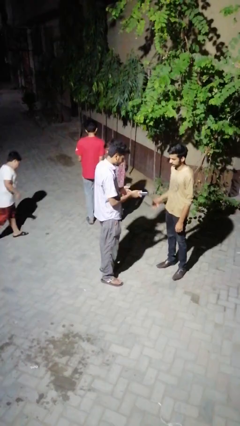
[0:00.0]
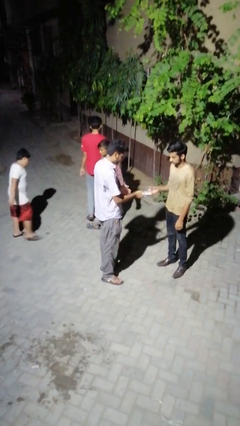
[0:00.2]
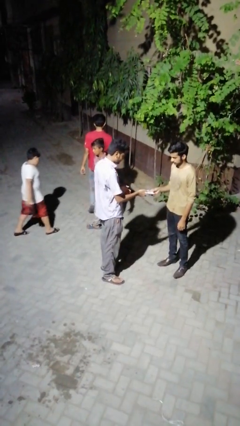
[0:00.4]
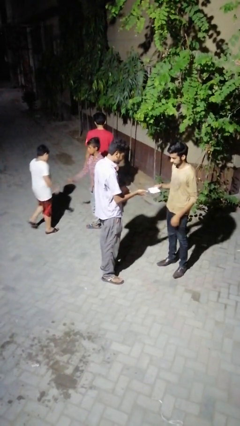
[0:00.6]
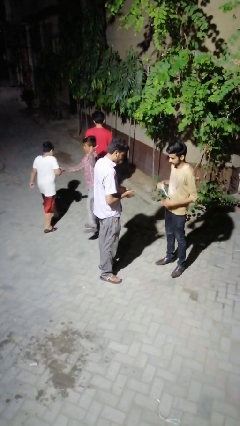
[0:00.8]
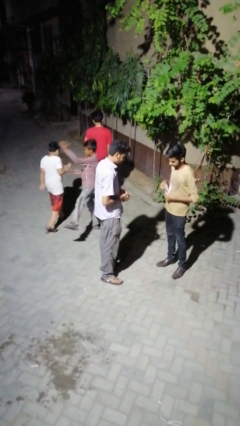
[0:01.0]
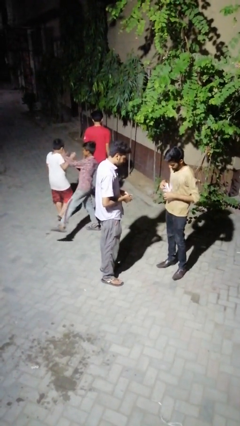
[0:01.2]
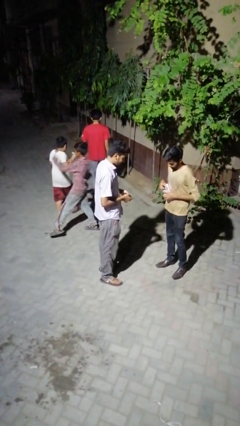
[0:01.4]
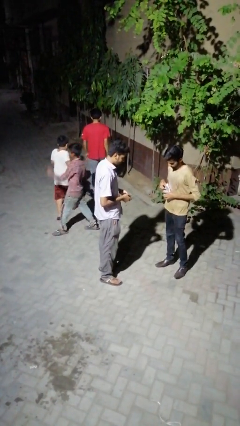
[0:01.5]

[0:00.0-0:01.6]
person transfers object to person

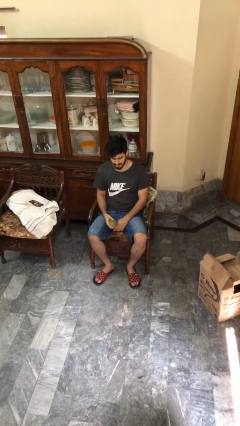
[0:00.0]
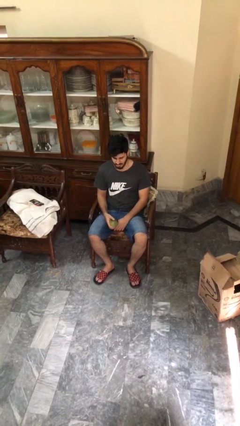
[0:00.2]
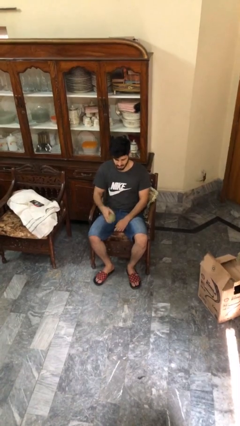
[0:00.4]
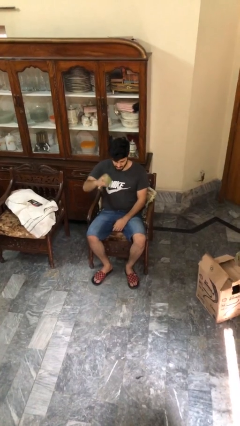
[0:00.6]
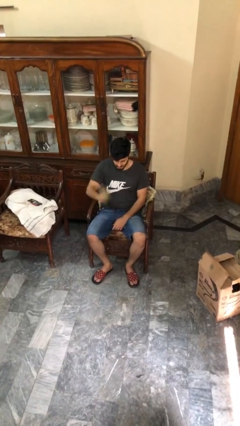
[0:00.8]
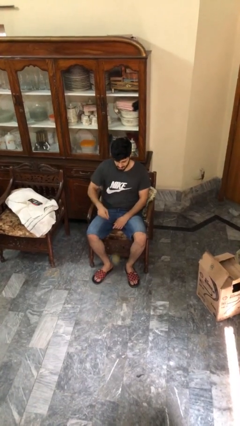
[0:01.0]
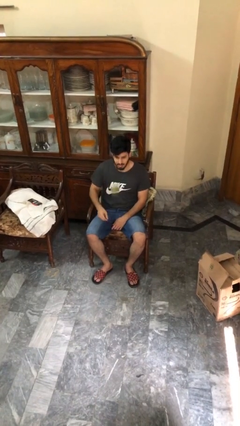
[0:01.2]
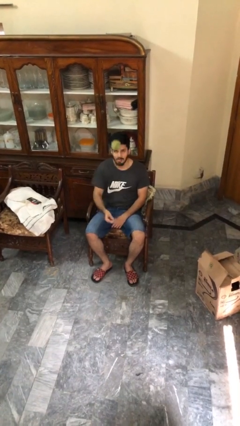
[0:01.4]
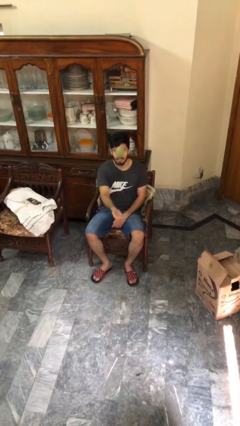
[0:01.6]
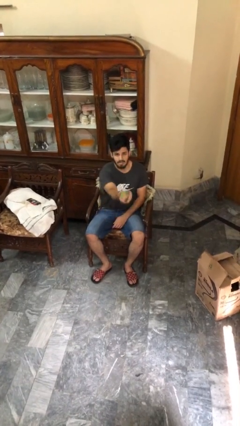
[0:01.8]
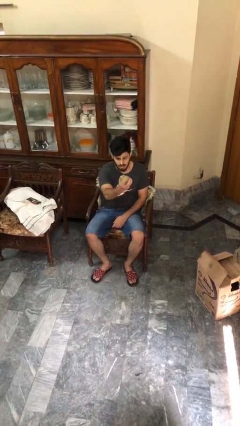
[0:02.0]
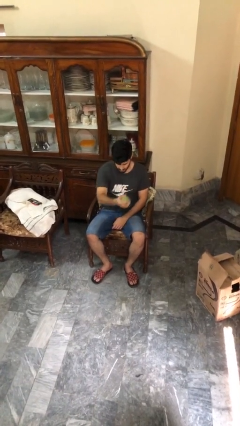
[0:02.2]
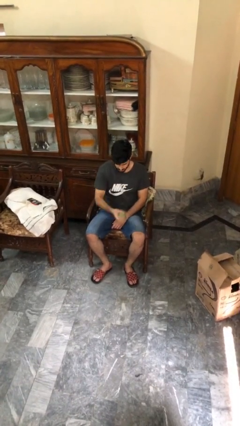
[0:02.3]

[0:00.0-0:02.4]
person bounces ball on floor

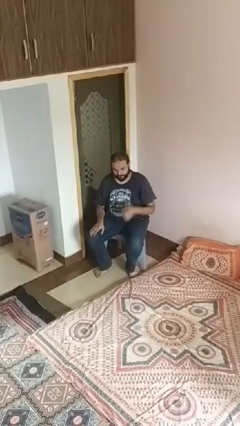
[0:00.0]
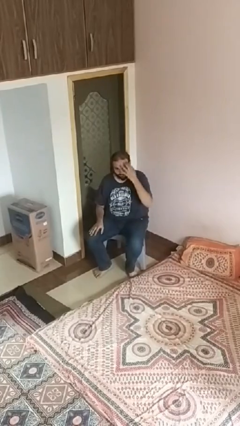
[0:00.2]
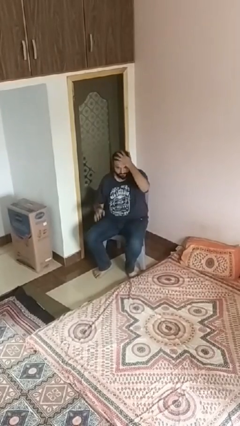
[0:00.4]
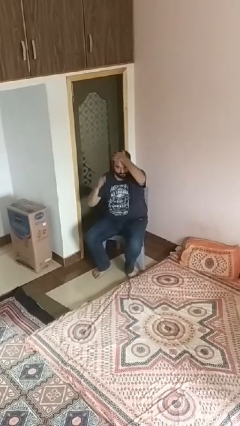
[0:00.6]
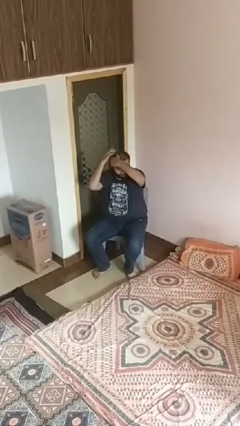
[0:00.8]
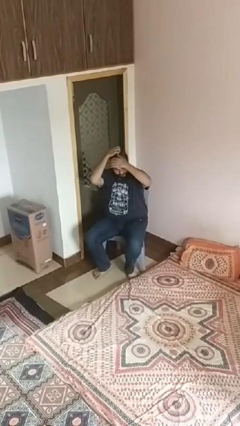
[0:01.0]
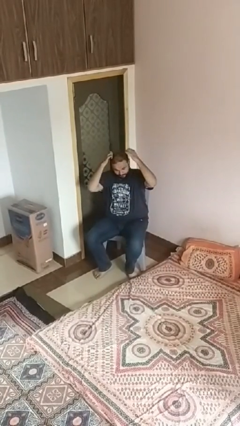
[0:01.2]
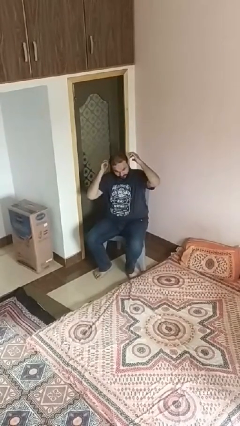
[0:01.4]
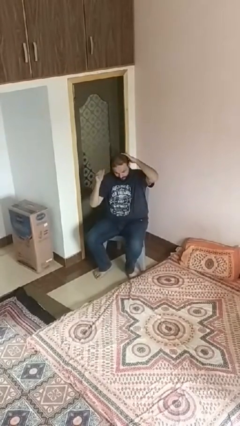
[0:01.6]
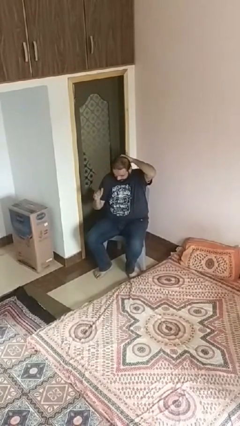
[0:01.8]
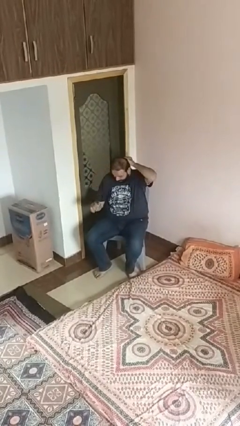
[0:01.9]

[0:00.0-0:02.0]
person strokes hair

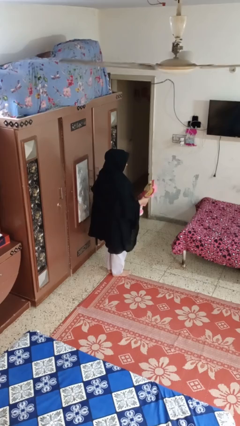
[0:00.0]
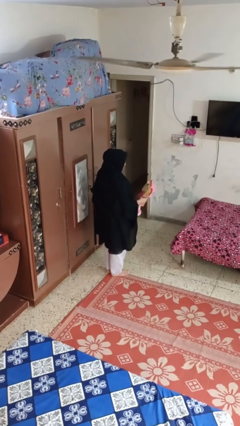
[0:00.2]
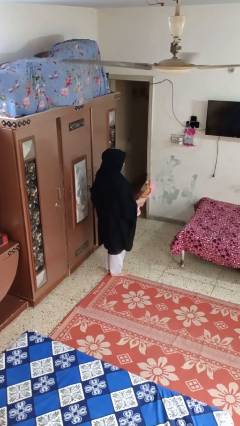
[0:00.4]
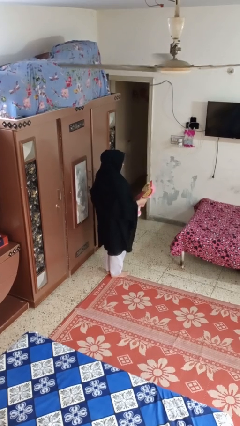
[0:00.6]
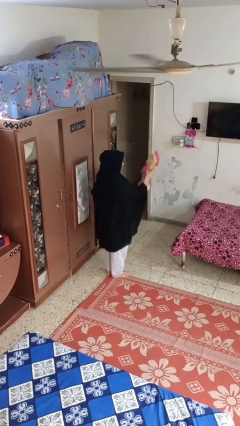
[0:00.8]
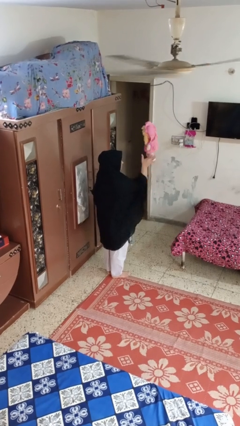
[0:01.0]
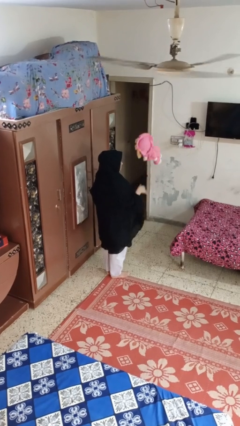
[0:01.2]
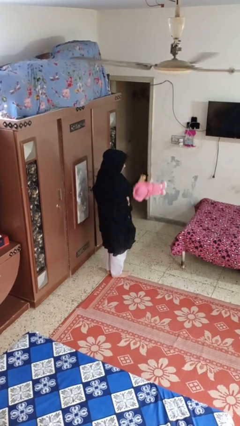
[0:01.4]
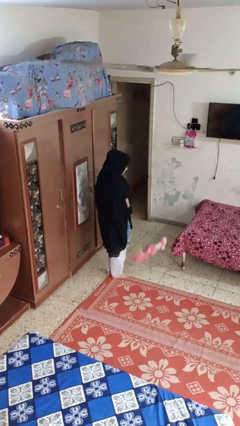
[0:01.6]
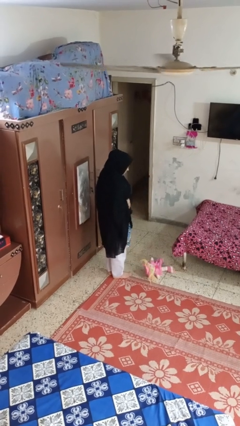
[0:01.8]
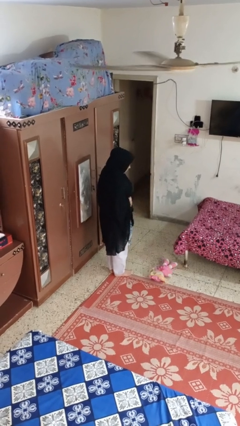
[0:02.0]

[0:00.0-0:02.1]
person throws object into air

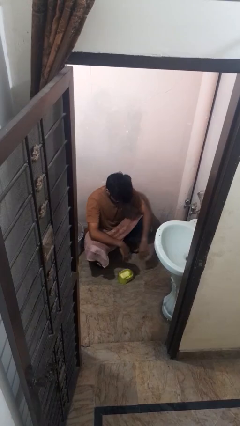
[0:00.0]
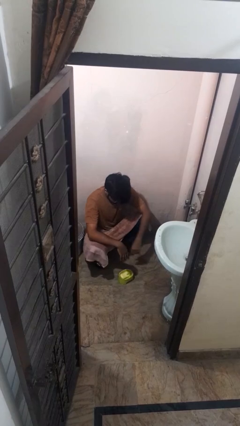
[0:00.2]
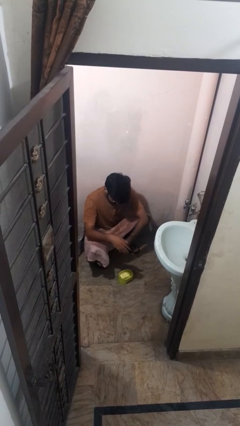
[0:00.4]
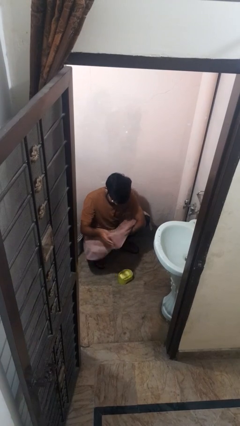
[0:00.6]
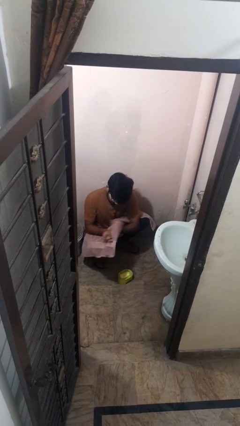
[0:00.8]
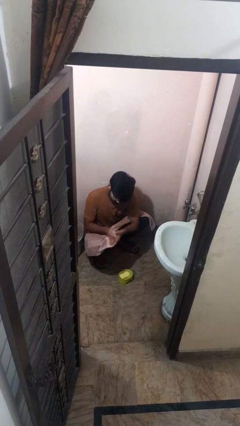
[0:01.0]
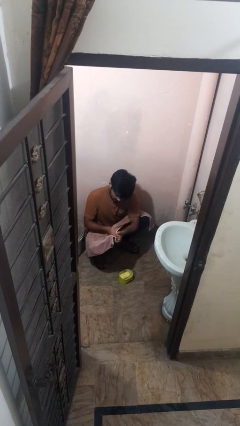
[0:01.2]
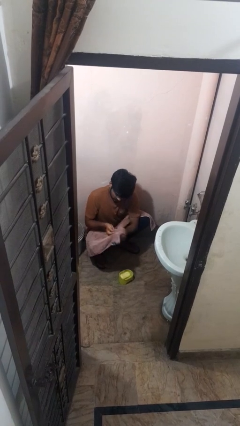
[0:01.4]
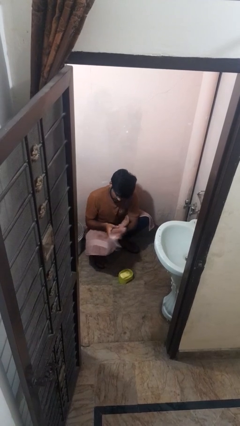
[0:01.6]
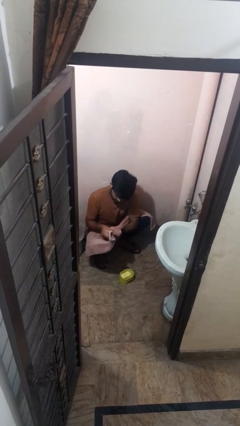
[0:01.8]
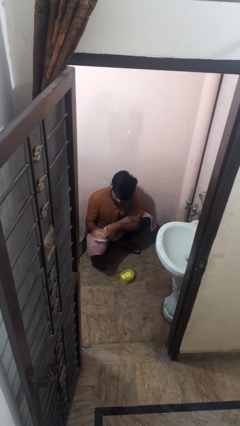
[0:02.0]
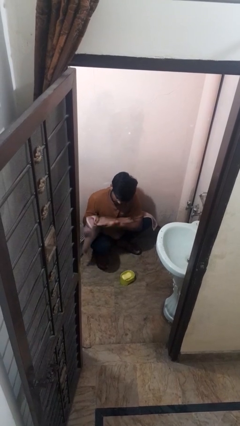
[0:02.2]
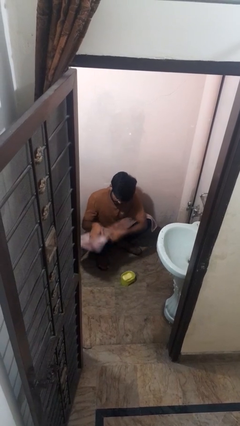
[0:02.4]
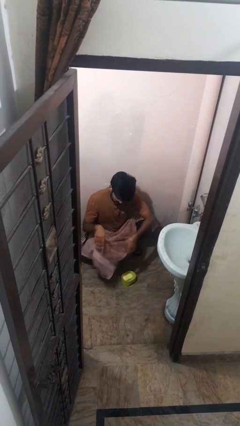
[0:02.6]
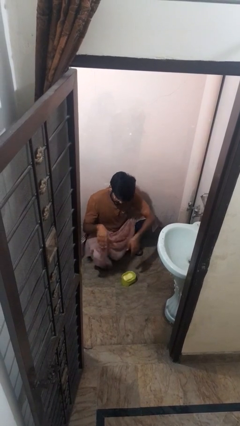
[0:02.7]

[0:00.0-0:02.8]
person dries hands with towel

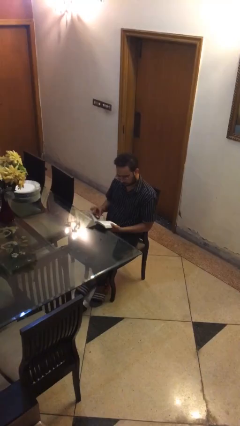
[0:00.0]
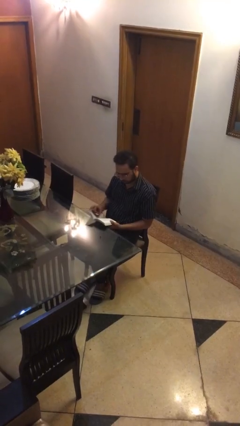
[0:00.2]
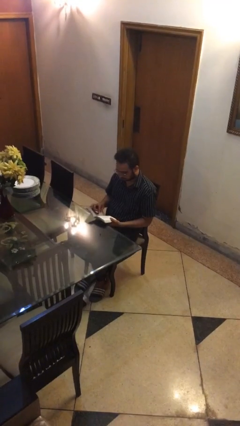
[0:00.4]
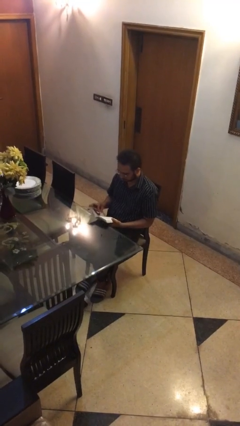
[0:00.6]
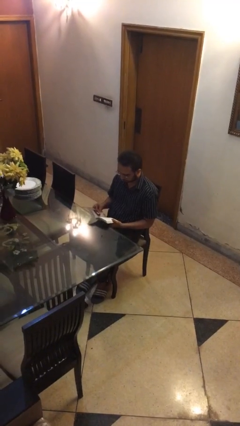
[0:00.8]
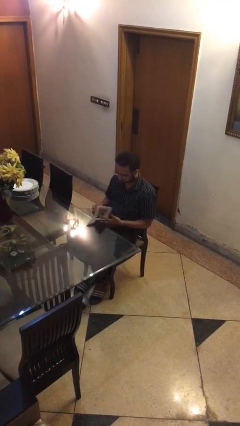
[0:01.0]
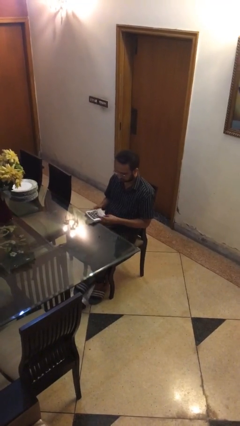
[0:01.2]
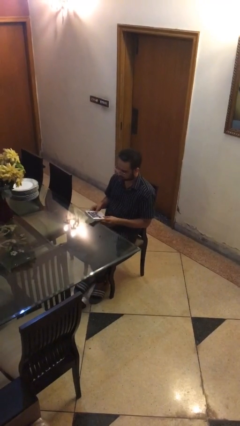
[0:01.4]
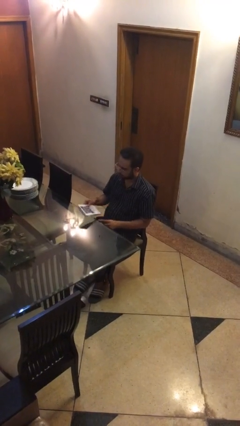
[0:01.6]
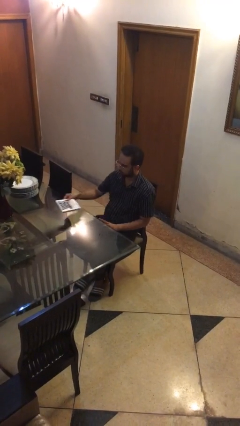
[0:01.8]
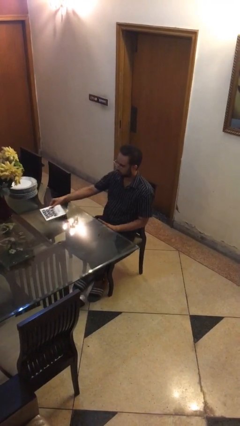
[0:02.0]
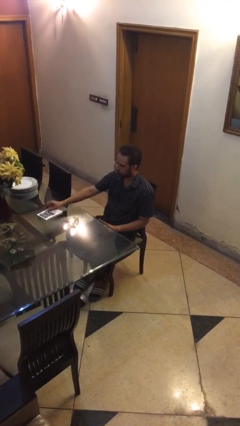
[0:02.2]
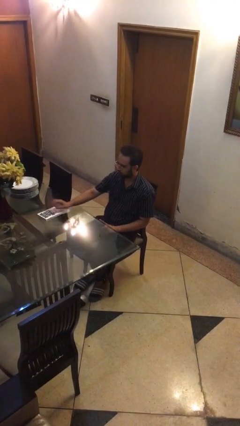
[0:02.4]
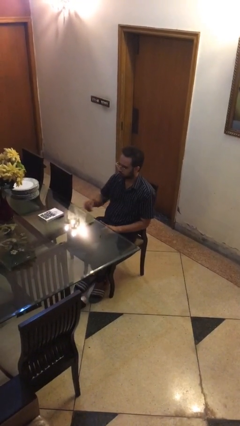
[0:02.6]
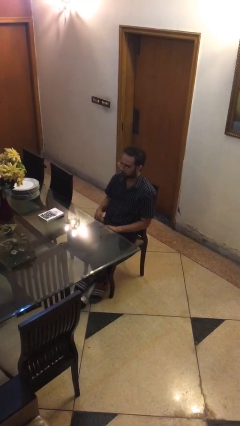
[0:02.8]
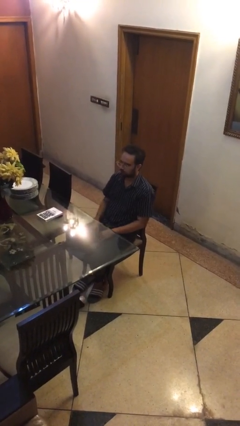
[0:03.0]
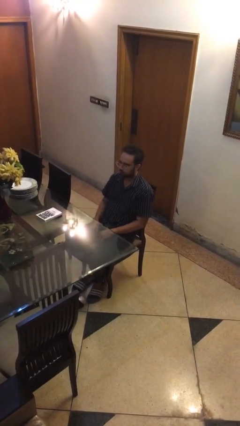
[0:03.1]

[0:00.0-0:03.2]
person puts down object on table

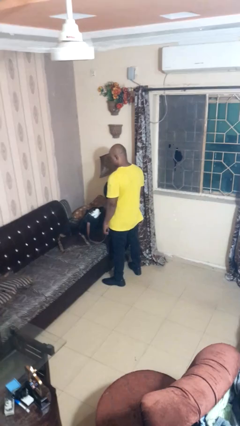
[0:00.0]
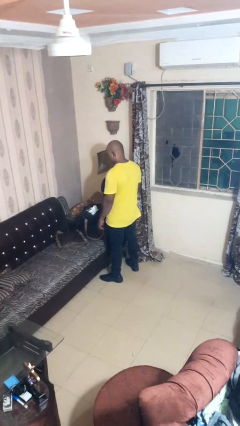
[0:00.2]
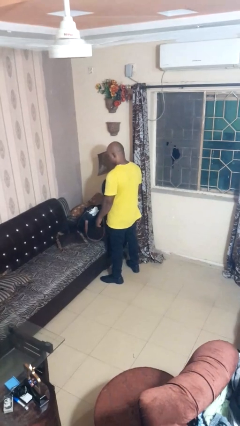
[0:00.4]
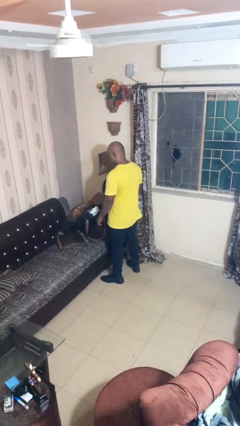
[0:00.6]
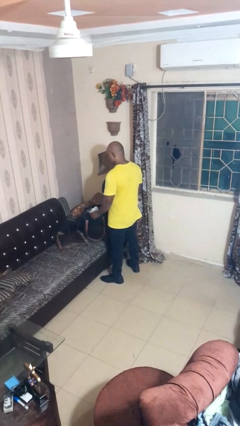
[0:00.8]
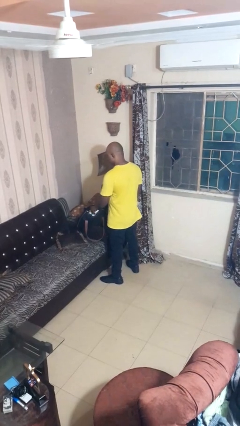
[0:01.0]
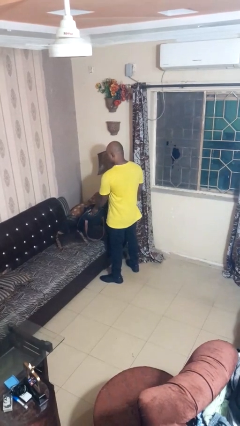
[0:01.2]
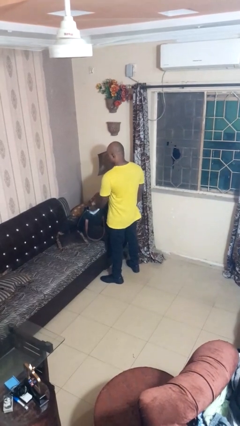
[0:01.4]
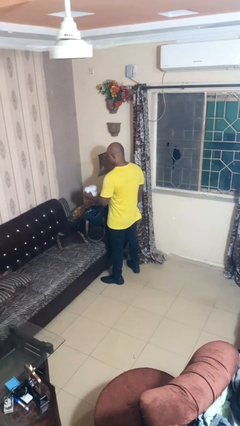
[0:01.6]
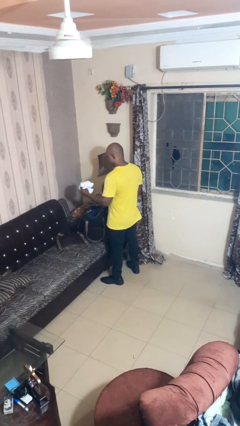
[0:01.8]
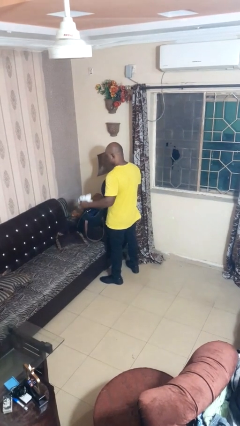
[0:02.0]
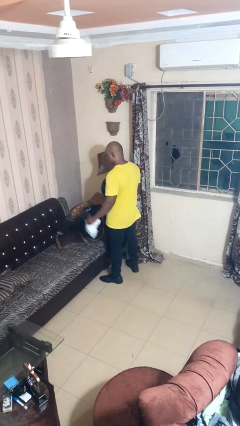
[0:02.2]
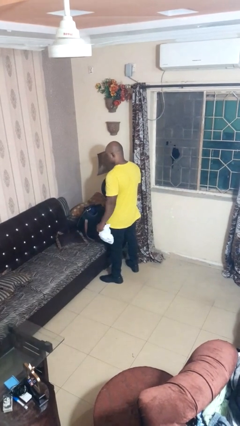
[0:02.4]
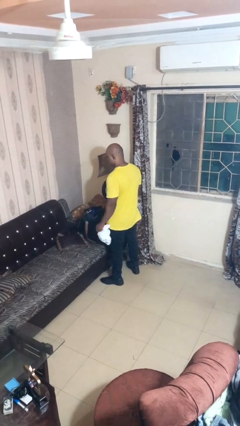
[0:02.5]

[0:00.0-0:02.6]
person takes object from bag
